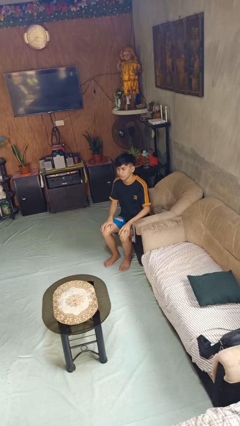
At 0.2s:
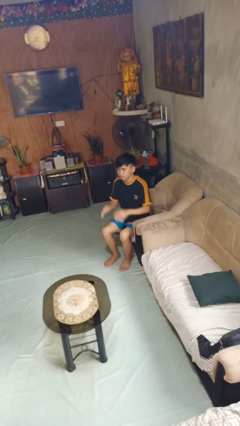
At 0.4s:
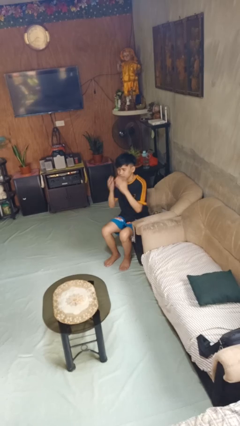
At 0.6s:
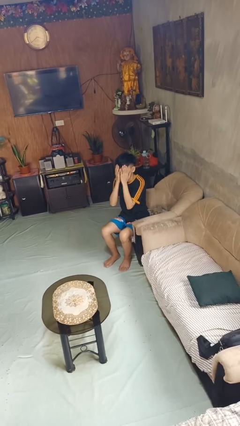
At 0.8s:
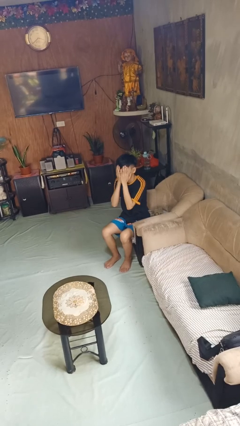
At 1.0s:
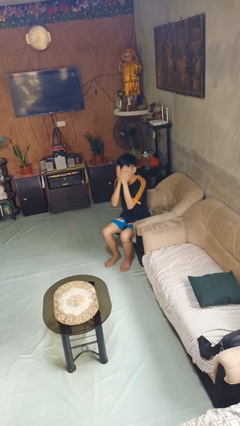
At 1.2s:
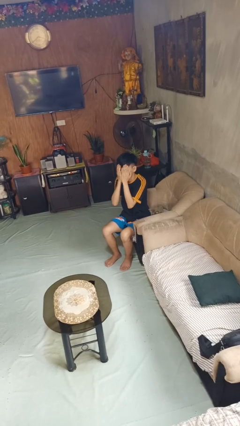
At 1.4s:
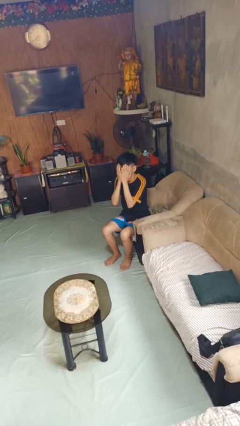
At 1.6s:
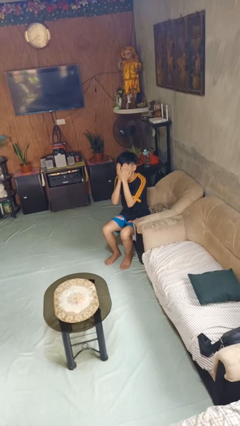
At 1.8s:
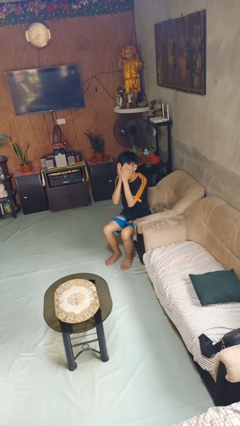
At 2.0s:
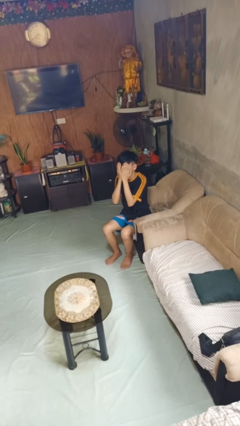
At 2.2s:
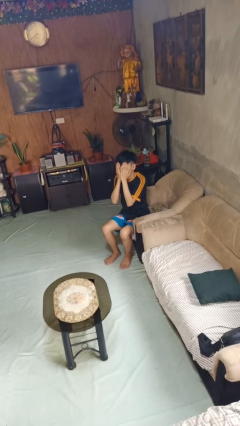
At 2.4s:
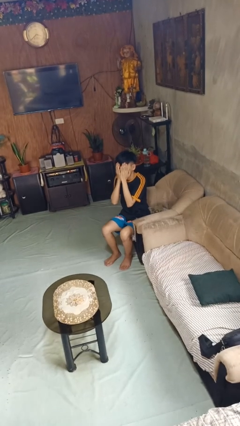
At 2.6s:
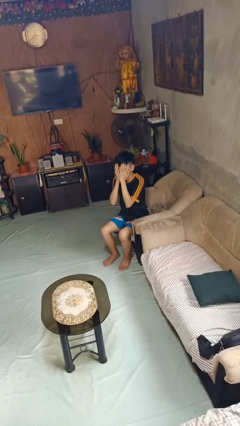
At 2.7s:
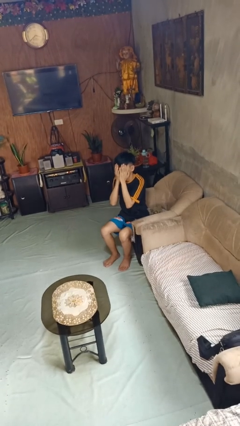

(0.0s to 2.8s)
person covers face with hands

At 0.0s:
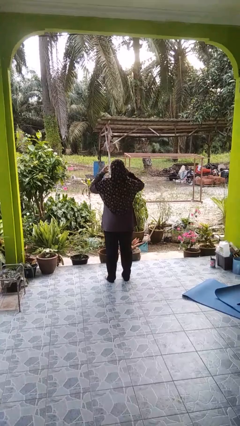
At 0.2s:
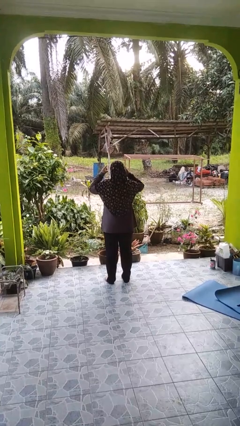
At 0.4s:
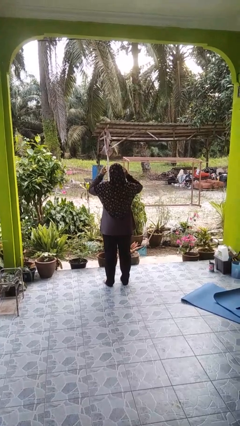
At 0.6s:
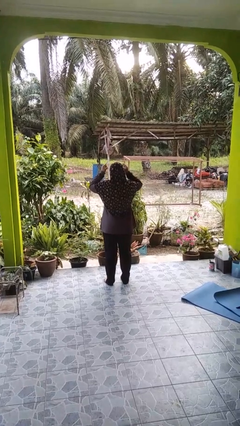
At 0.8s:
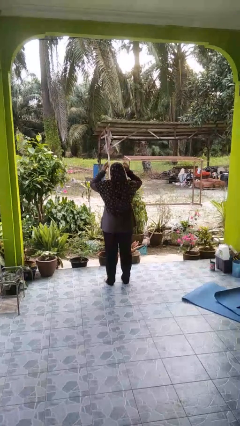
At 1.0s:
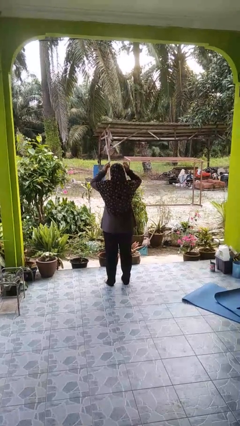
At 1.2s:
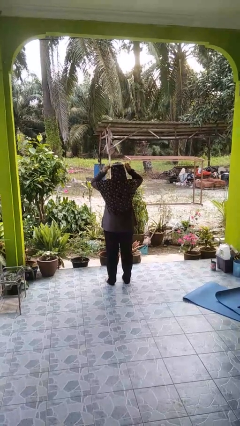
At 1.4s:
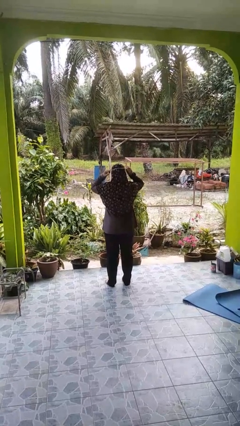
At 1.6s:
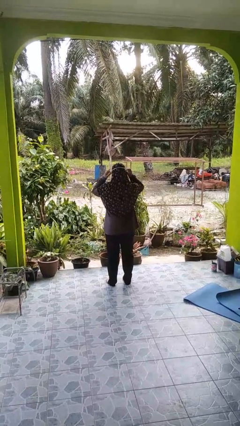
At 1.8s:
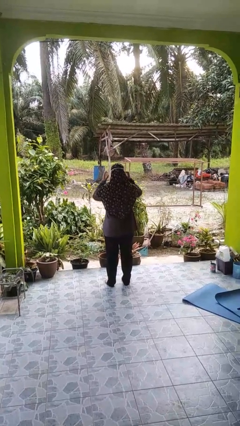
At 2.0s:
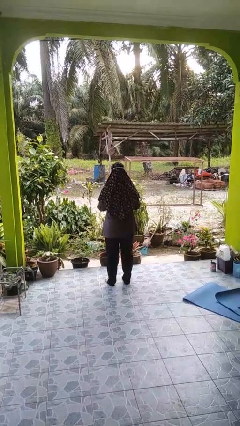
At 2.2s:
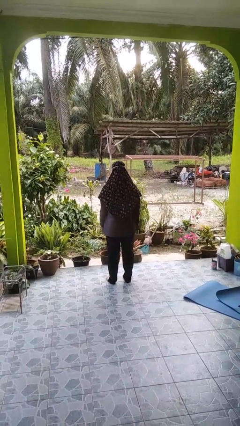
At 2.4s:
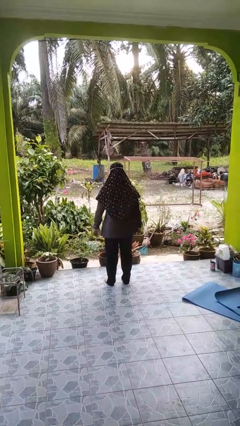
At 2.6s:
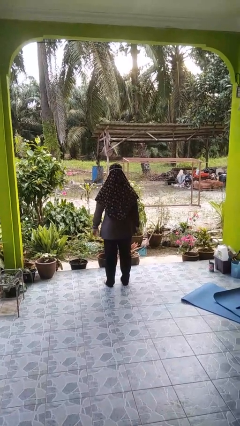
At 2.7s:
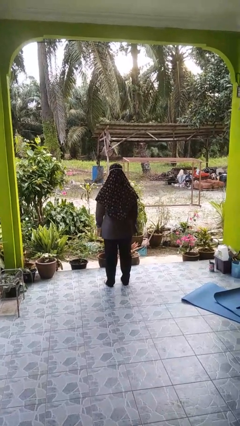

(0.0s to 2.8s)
person puts on facemask

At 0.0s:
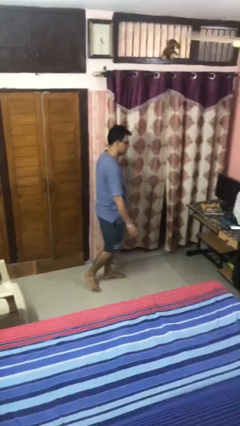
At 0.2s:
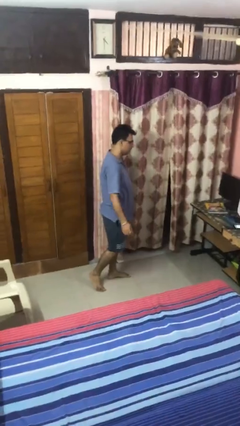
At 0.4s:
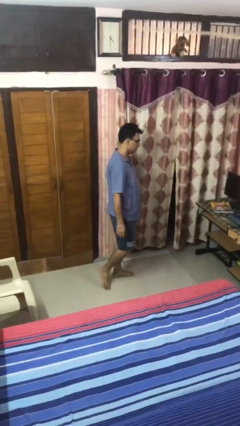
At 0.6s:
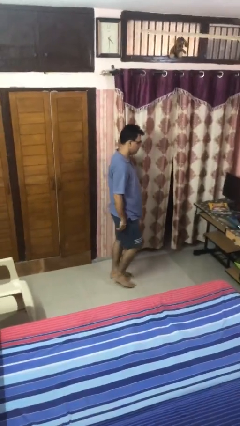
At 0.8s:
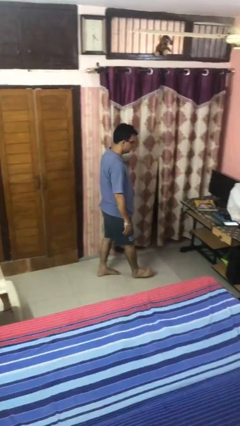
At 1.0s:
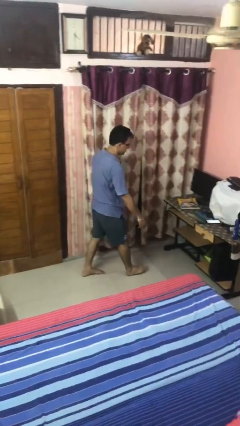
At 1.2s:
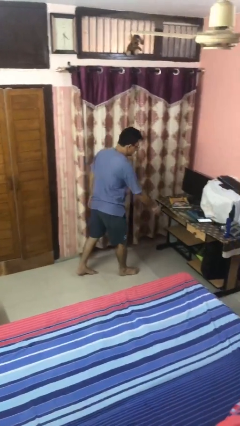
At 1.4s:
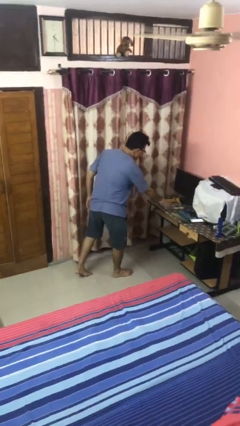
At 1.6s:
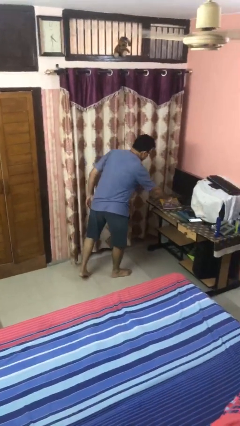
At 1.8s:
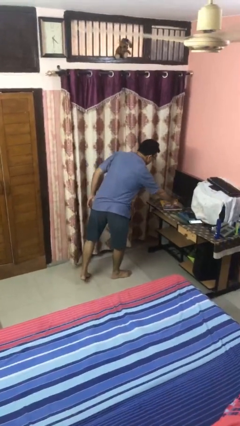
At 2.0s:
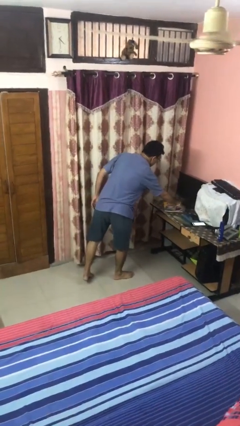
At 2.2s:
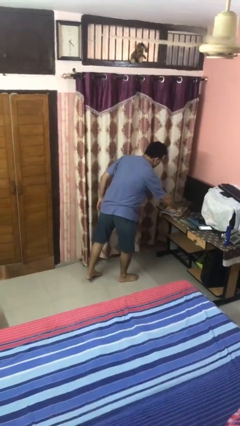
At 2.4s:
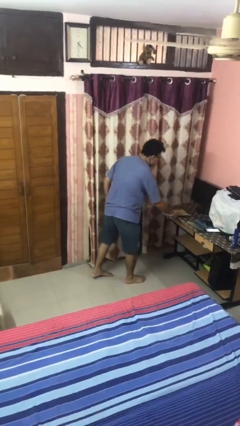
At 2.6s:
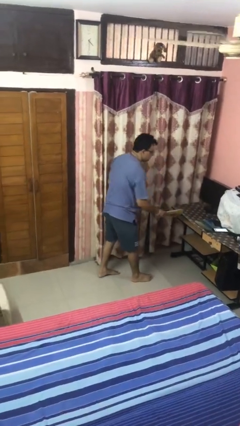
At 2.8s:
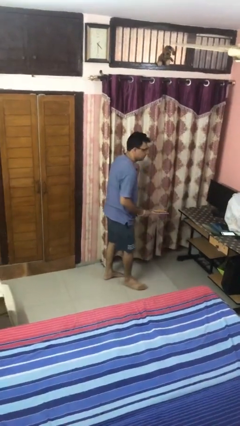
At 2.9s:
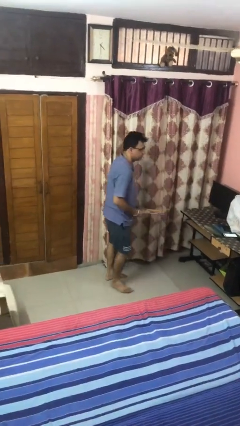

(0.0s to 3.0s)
person picks up object from table

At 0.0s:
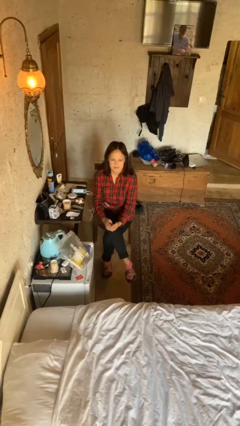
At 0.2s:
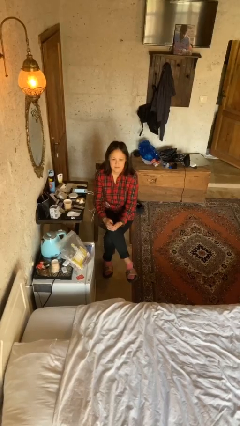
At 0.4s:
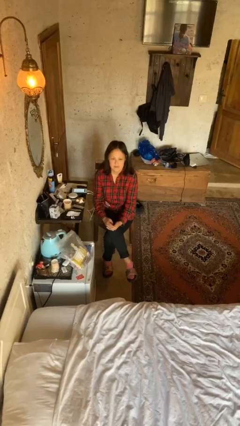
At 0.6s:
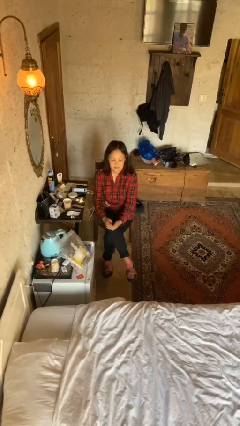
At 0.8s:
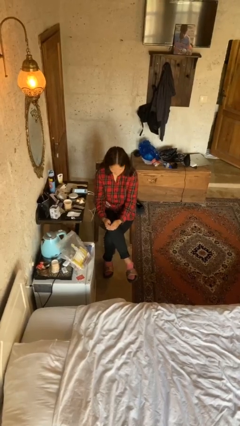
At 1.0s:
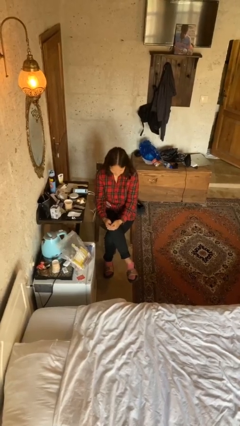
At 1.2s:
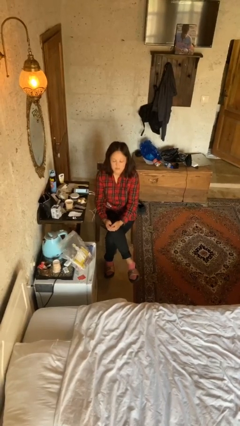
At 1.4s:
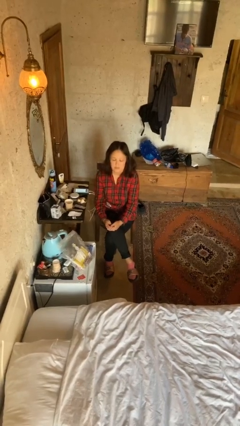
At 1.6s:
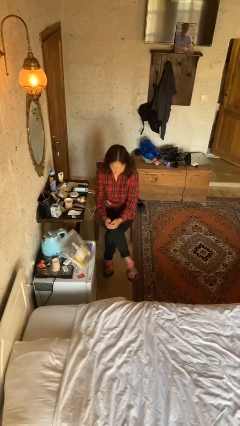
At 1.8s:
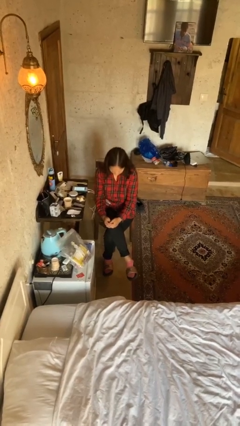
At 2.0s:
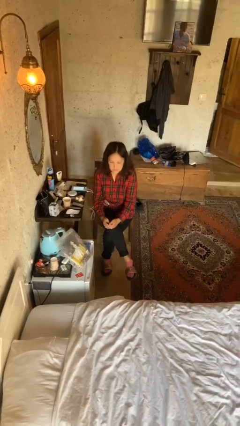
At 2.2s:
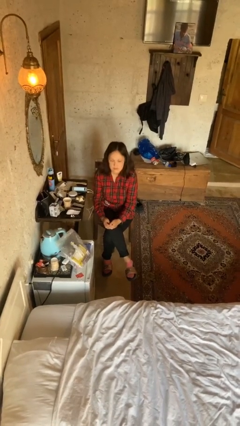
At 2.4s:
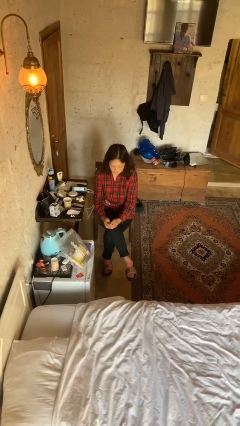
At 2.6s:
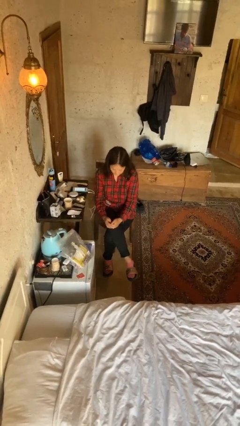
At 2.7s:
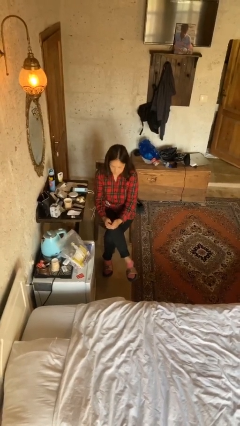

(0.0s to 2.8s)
person nods head

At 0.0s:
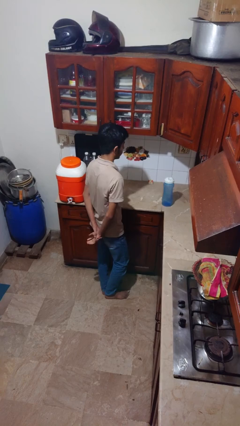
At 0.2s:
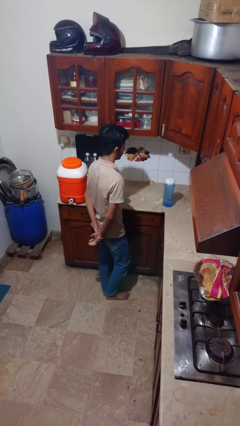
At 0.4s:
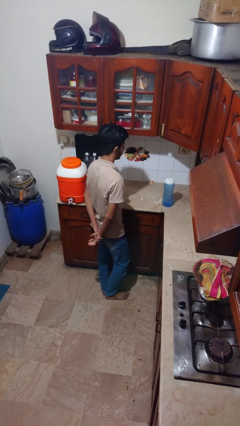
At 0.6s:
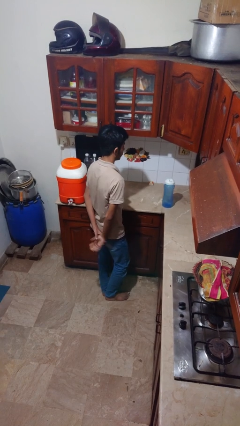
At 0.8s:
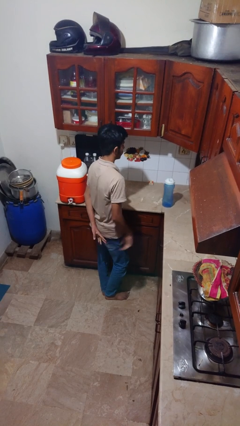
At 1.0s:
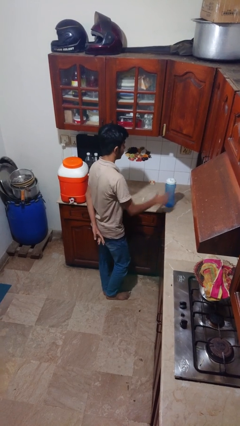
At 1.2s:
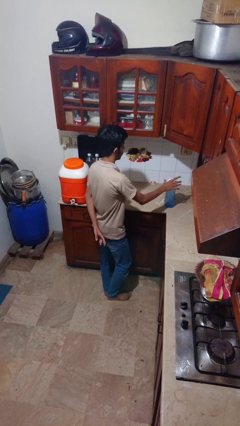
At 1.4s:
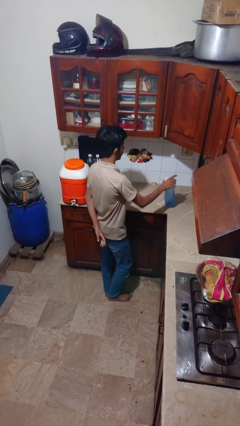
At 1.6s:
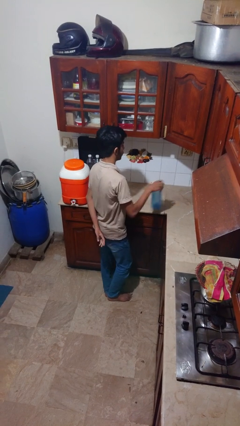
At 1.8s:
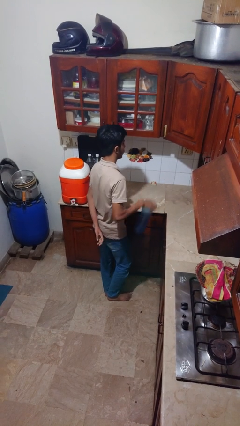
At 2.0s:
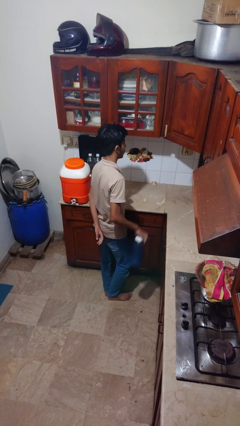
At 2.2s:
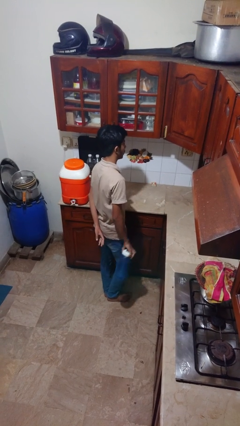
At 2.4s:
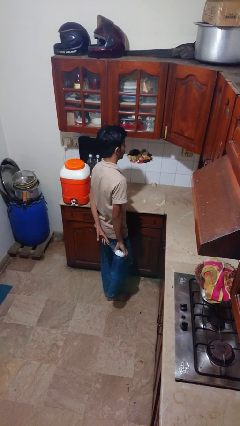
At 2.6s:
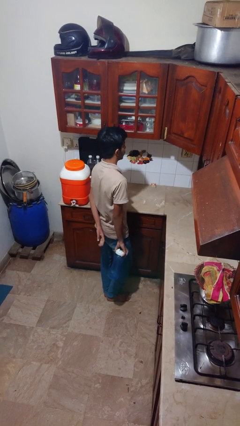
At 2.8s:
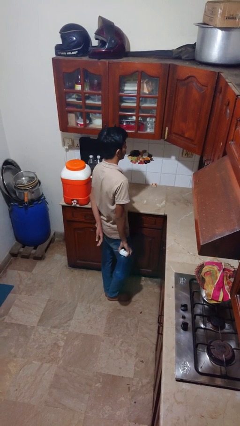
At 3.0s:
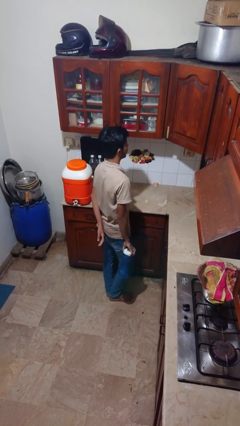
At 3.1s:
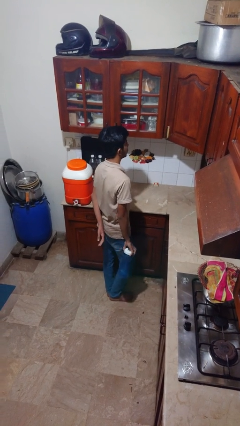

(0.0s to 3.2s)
person picks up object from countertop

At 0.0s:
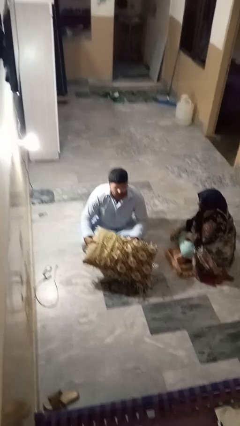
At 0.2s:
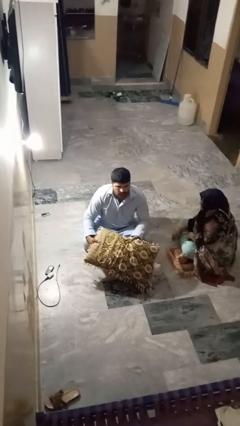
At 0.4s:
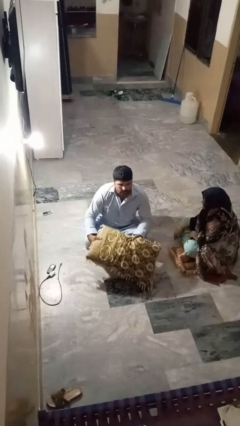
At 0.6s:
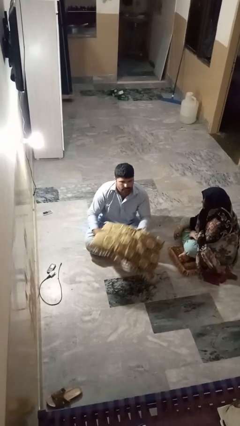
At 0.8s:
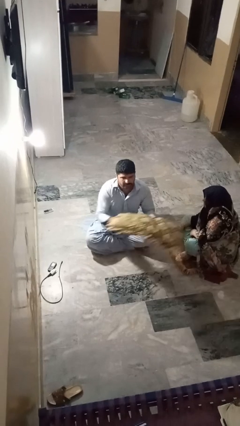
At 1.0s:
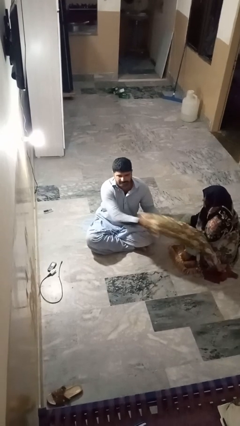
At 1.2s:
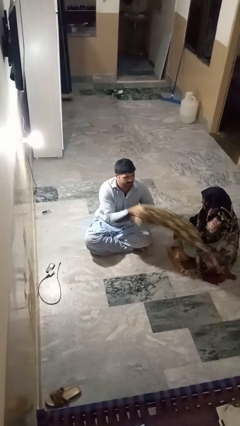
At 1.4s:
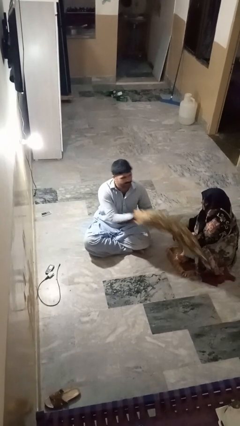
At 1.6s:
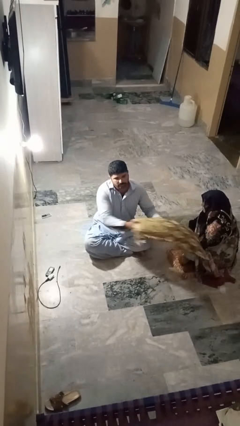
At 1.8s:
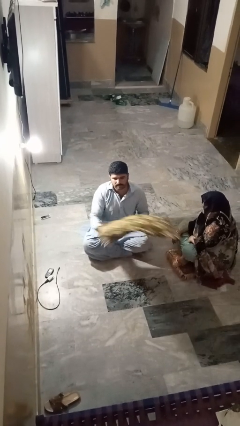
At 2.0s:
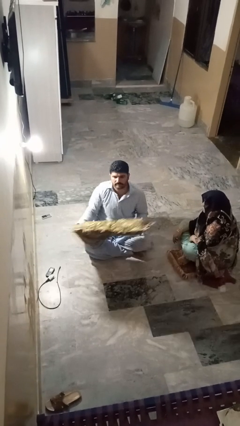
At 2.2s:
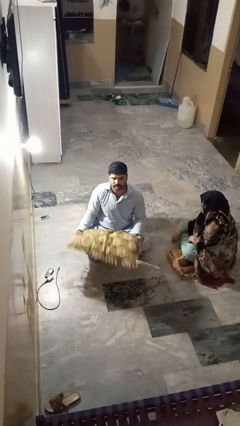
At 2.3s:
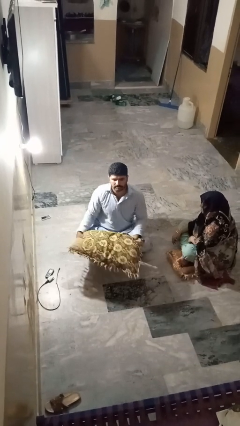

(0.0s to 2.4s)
person hits person with pillow

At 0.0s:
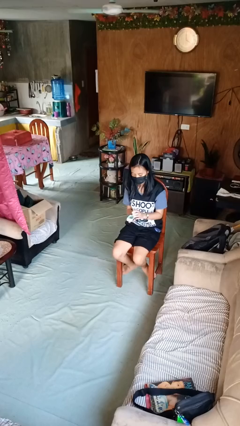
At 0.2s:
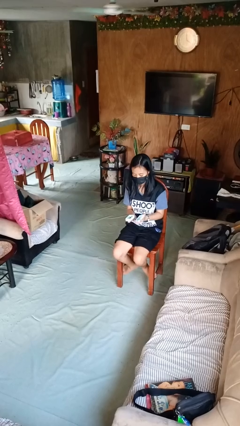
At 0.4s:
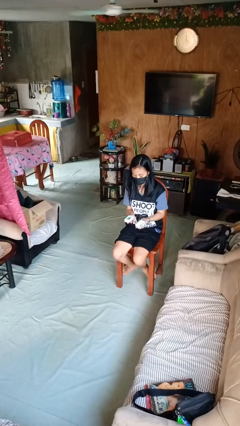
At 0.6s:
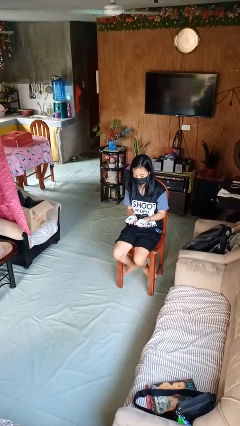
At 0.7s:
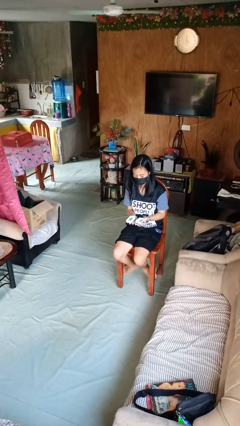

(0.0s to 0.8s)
person opens jewelry box
